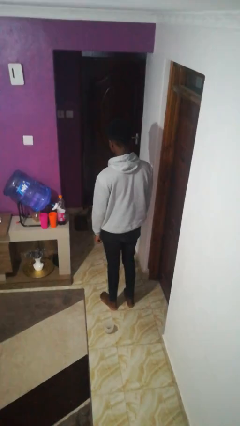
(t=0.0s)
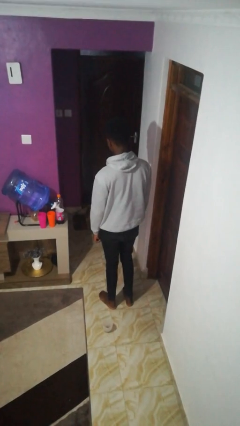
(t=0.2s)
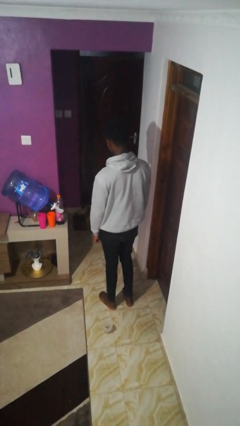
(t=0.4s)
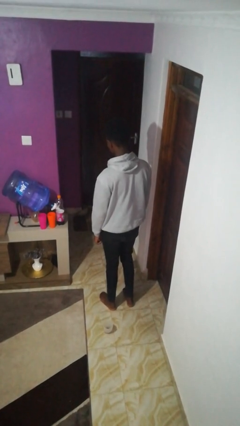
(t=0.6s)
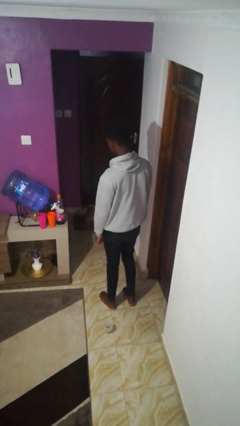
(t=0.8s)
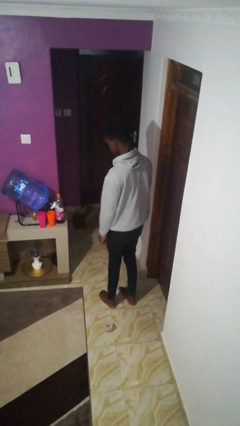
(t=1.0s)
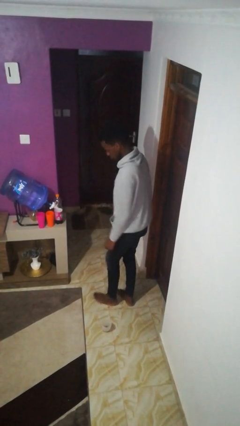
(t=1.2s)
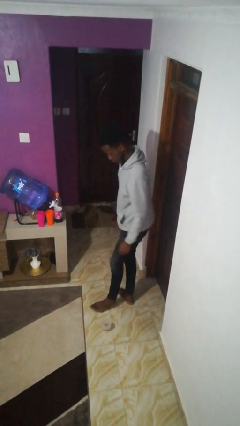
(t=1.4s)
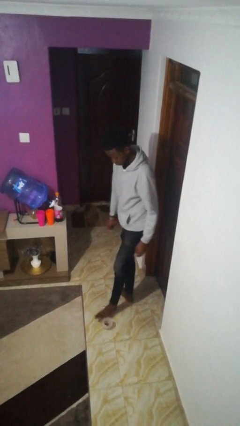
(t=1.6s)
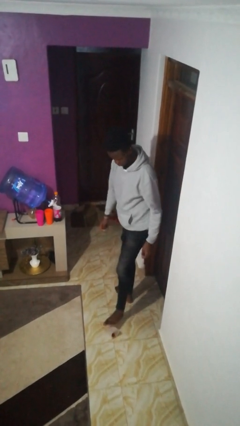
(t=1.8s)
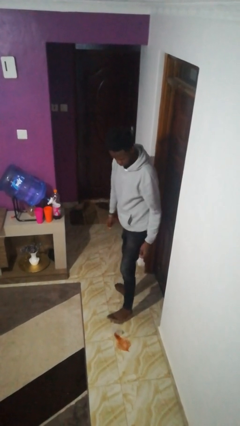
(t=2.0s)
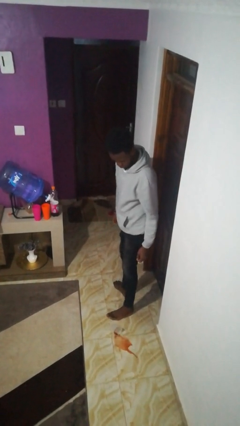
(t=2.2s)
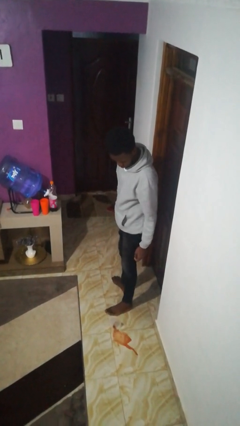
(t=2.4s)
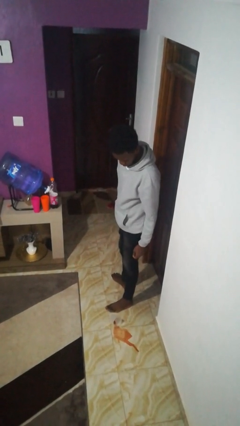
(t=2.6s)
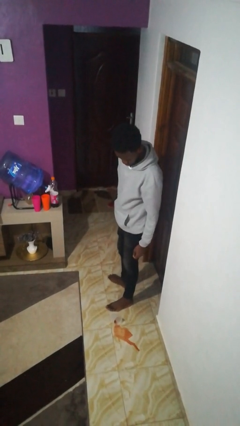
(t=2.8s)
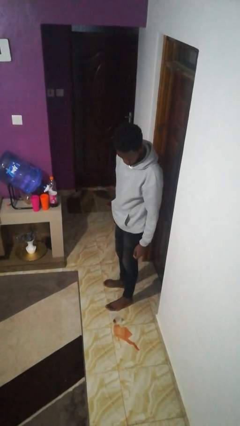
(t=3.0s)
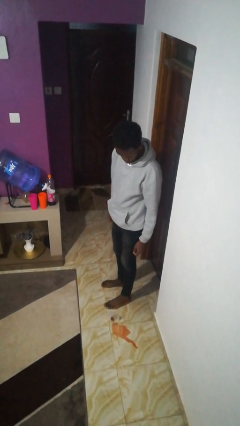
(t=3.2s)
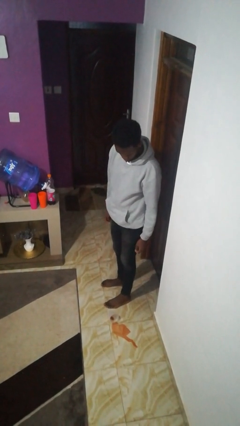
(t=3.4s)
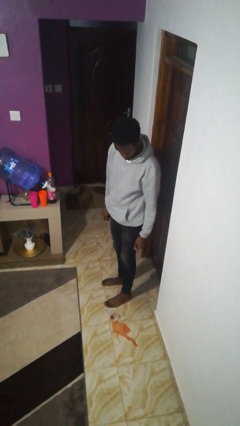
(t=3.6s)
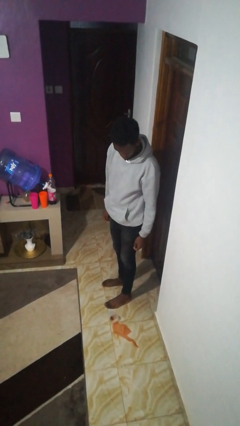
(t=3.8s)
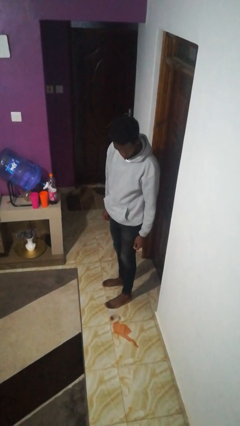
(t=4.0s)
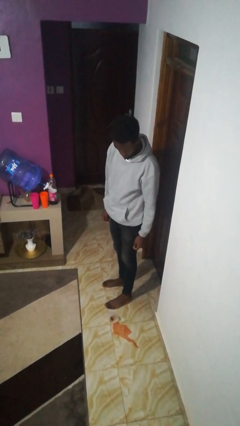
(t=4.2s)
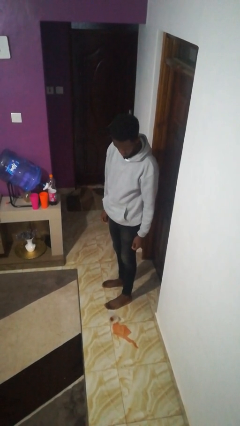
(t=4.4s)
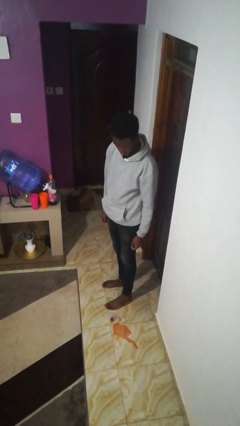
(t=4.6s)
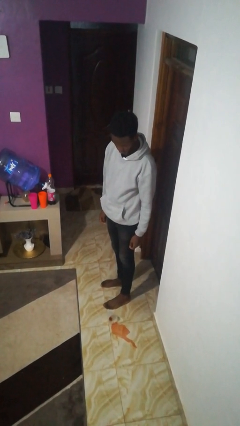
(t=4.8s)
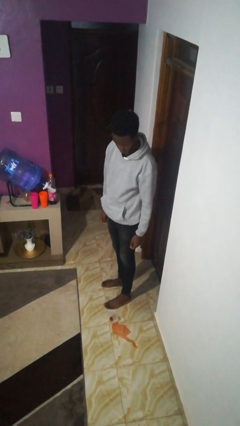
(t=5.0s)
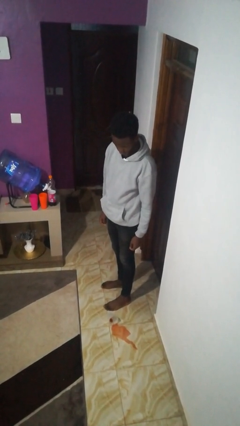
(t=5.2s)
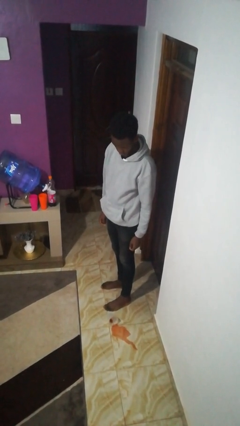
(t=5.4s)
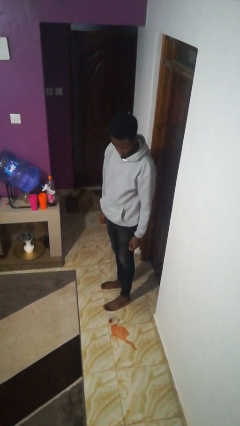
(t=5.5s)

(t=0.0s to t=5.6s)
person spills on floor

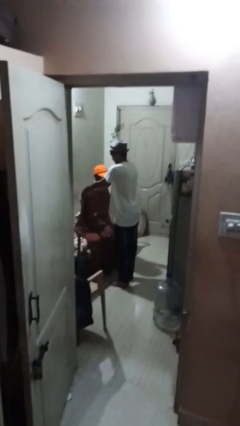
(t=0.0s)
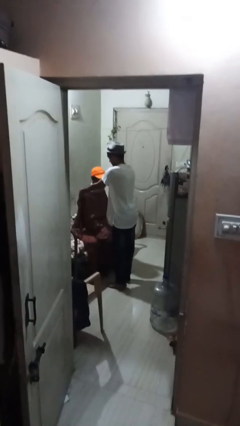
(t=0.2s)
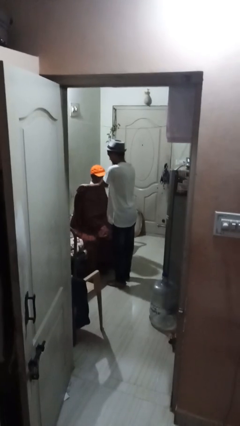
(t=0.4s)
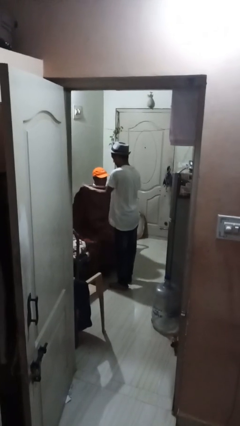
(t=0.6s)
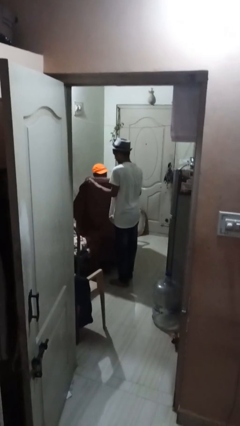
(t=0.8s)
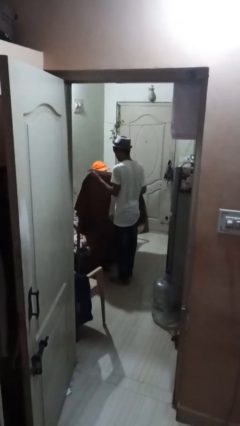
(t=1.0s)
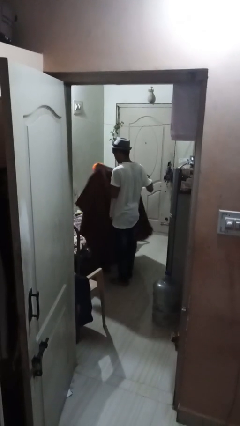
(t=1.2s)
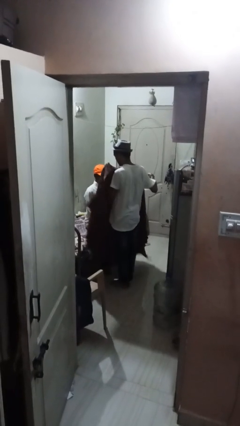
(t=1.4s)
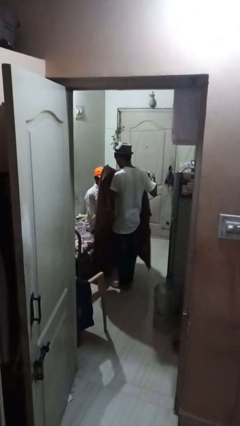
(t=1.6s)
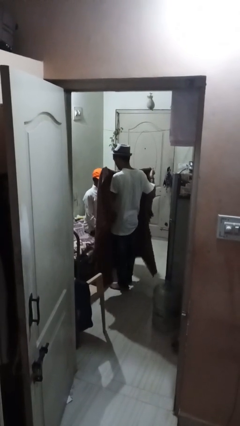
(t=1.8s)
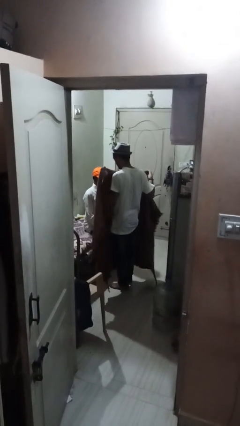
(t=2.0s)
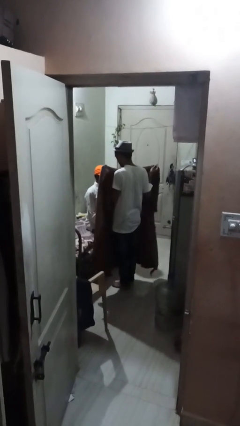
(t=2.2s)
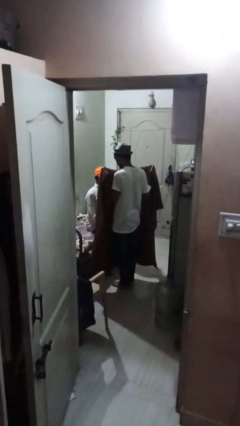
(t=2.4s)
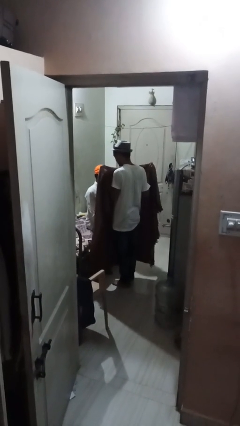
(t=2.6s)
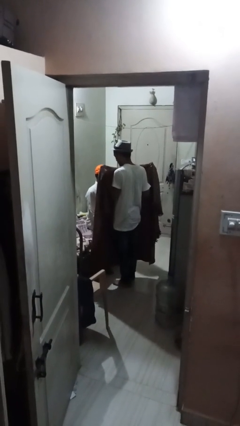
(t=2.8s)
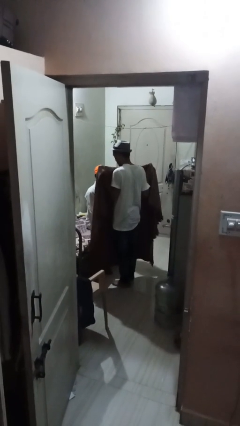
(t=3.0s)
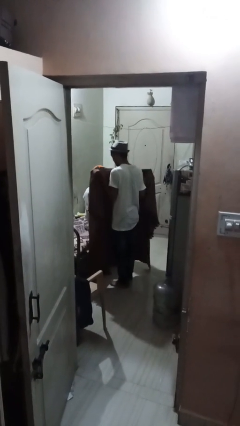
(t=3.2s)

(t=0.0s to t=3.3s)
person uncovers friend with blanket

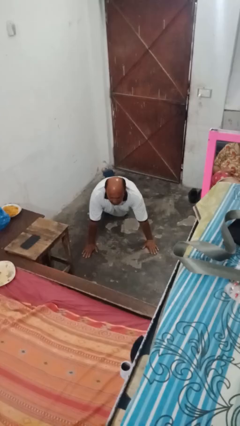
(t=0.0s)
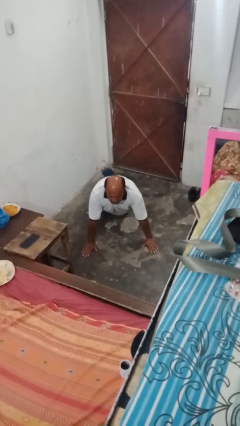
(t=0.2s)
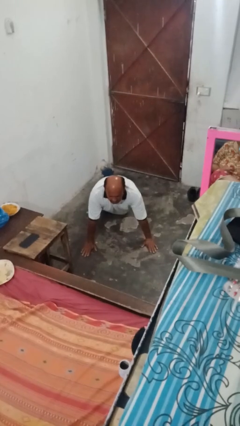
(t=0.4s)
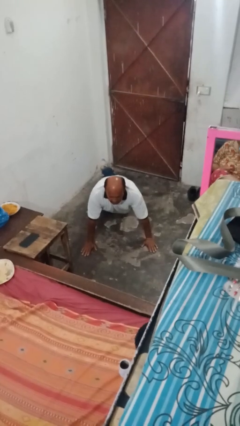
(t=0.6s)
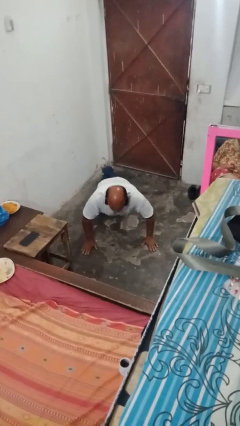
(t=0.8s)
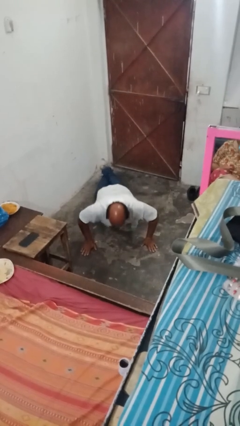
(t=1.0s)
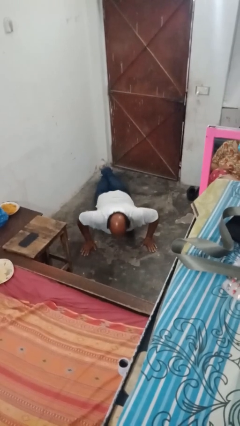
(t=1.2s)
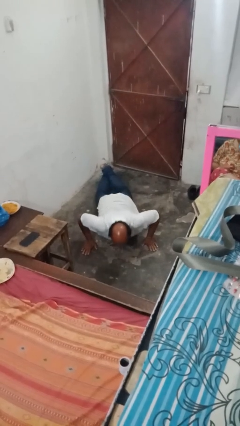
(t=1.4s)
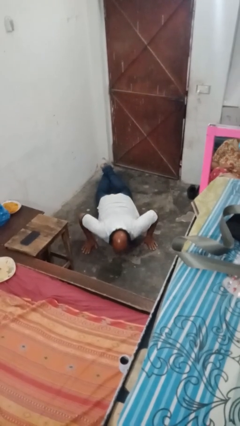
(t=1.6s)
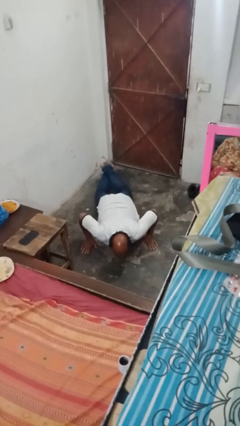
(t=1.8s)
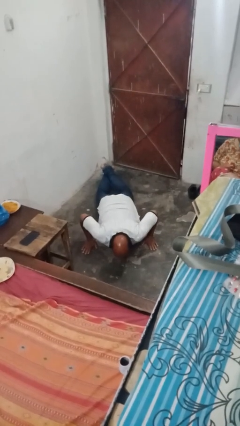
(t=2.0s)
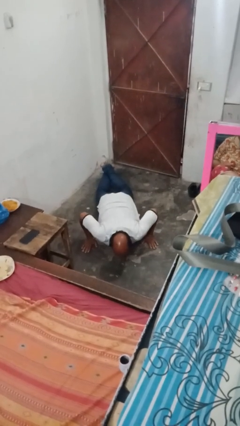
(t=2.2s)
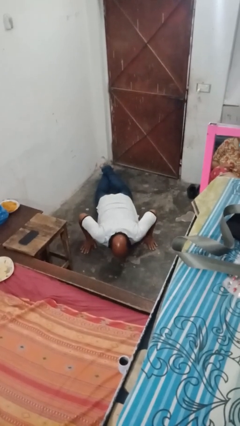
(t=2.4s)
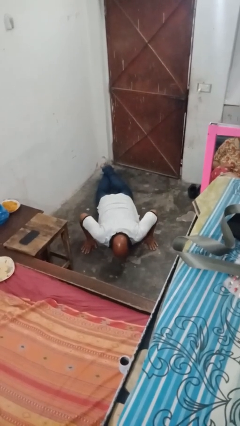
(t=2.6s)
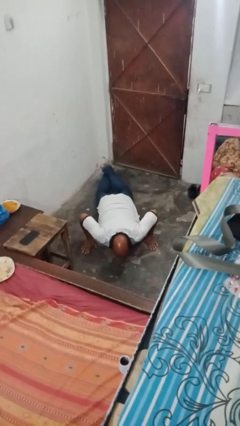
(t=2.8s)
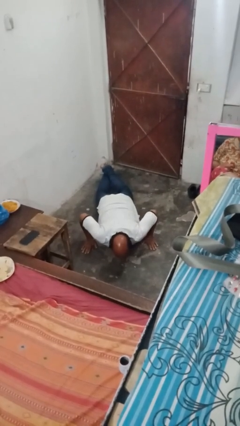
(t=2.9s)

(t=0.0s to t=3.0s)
person exercises with pushup

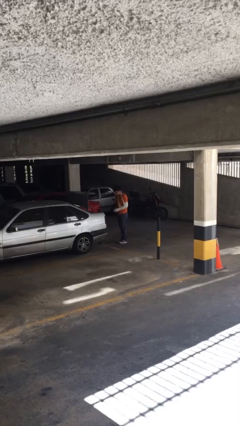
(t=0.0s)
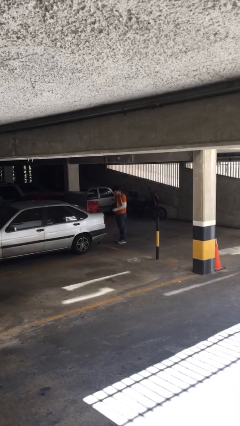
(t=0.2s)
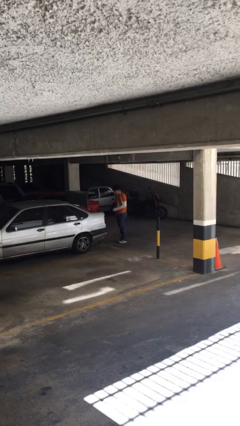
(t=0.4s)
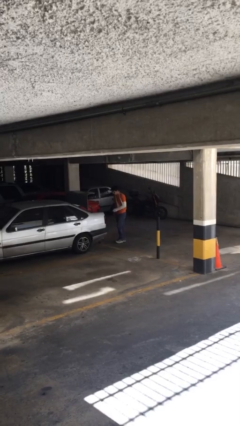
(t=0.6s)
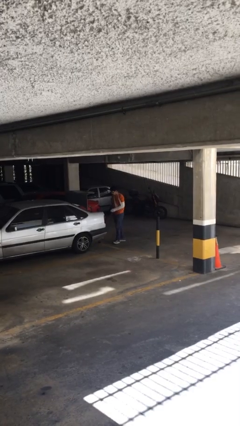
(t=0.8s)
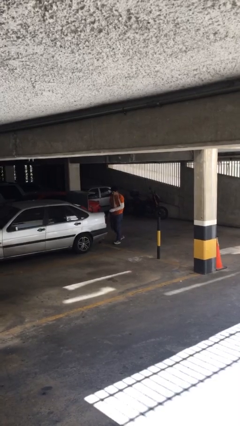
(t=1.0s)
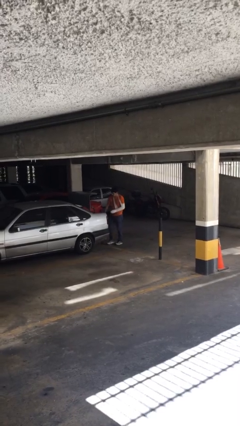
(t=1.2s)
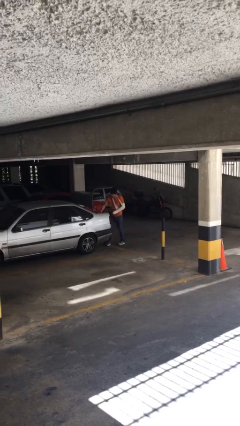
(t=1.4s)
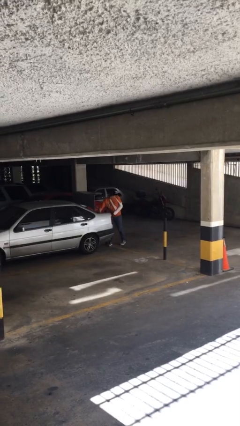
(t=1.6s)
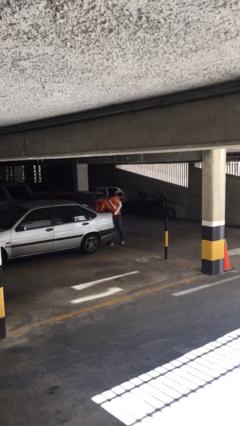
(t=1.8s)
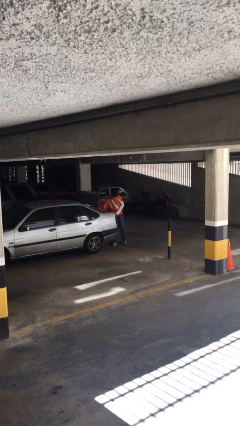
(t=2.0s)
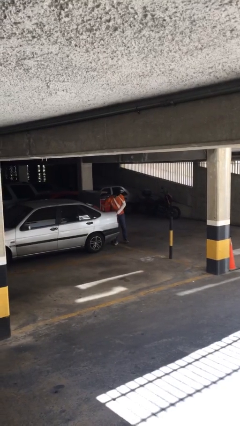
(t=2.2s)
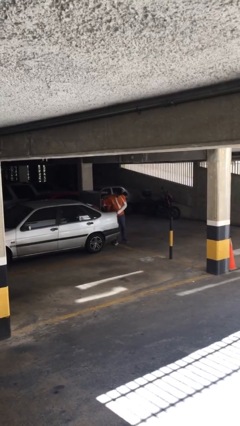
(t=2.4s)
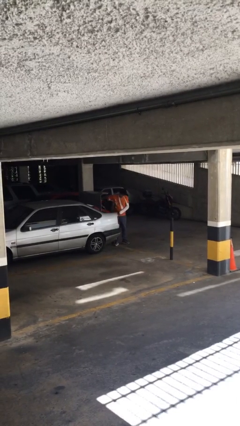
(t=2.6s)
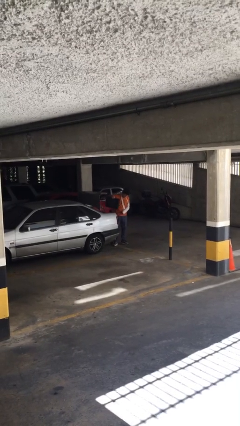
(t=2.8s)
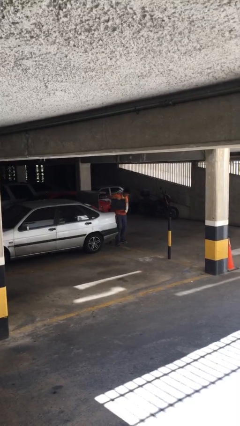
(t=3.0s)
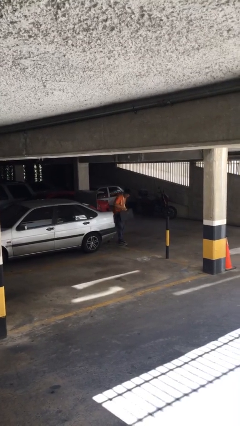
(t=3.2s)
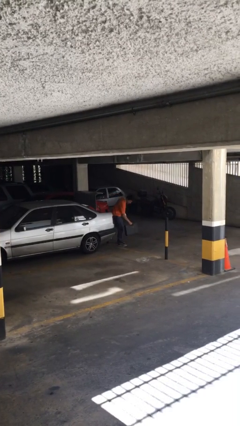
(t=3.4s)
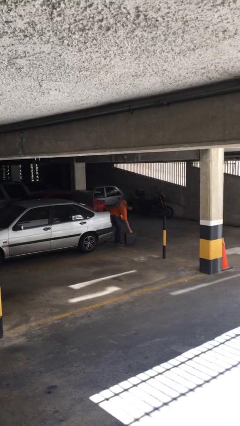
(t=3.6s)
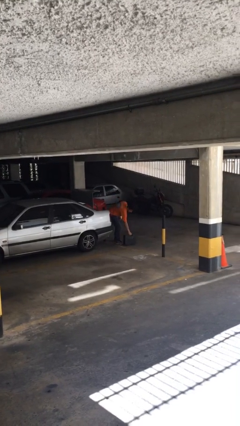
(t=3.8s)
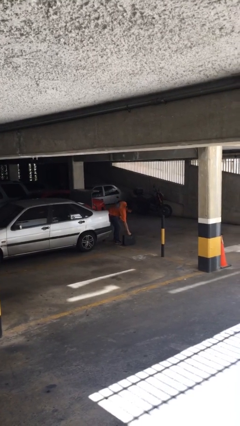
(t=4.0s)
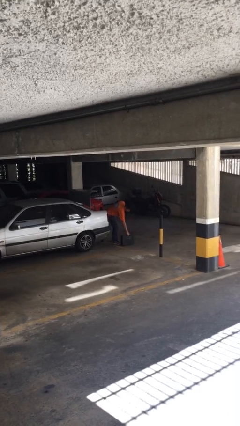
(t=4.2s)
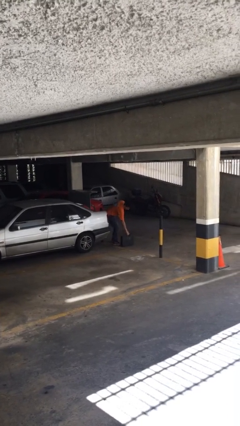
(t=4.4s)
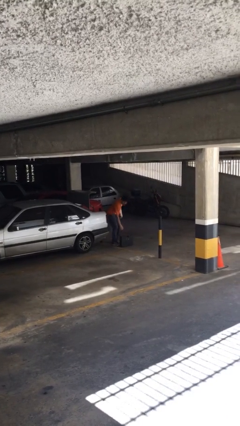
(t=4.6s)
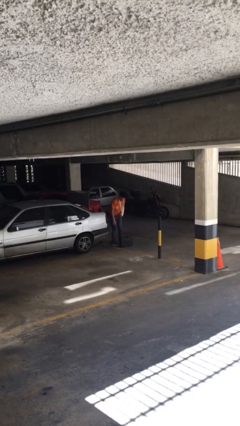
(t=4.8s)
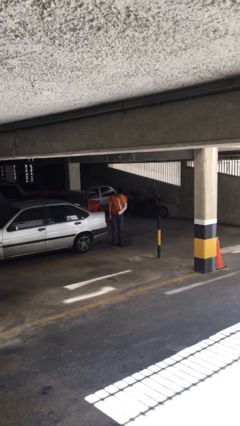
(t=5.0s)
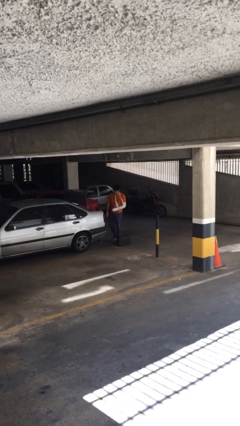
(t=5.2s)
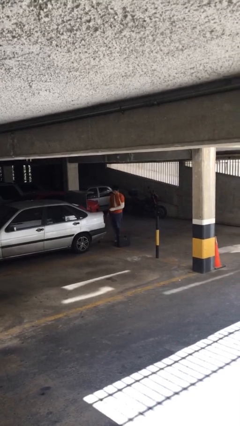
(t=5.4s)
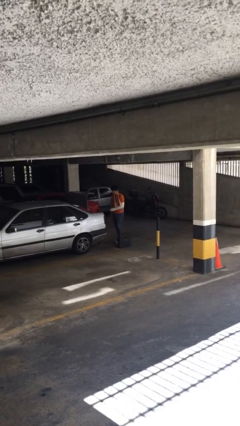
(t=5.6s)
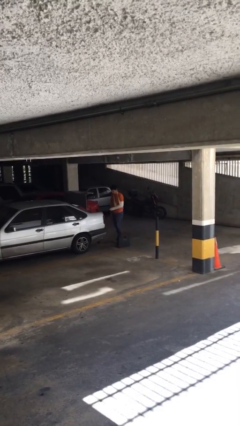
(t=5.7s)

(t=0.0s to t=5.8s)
person unloads car

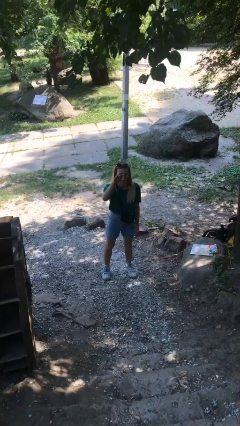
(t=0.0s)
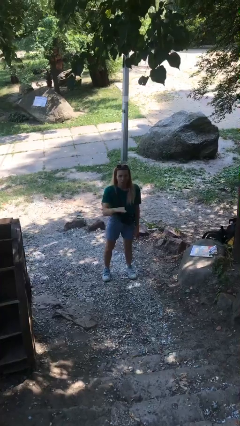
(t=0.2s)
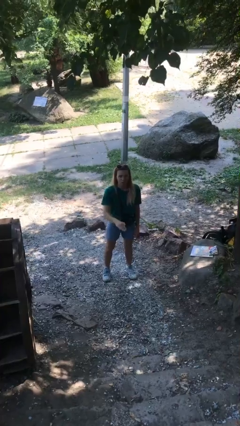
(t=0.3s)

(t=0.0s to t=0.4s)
person gestures swipe down
